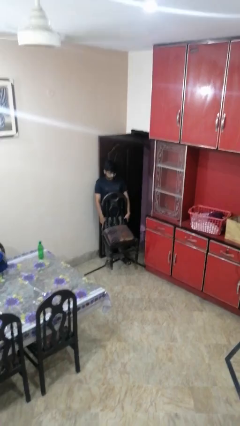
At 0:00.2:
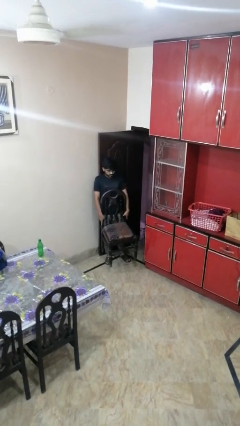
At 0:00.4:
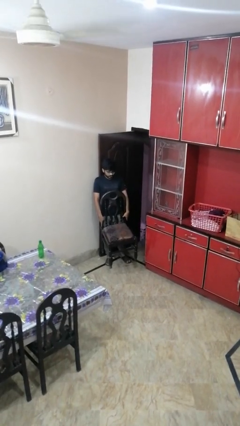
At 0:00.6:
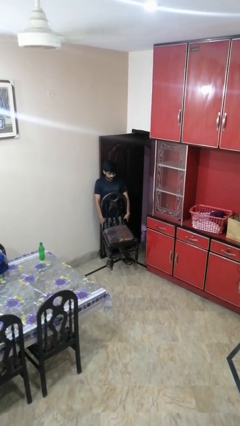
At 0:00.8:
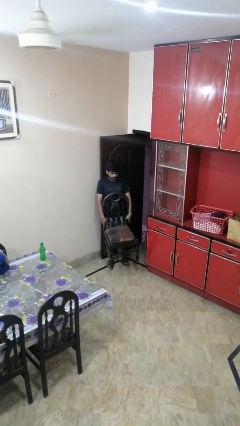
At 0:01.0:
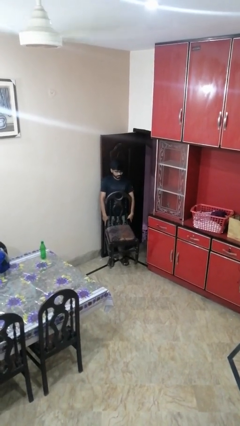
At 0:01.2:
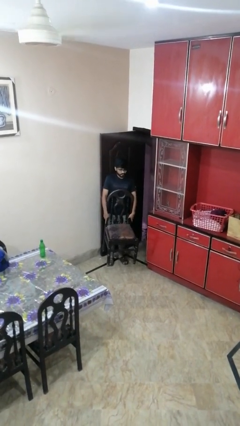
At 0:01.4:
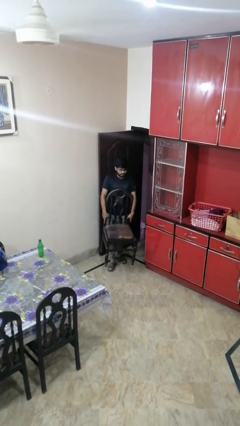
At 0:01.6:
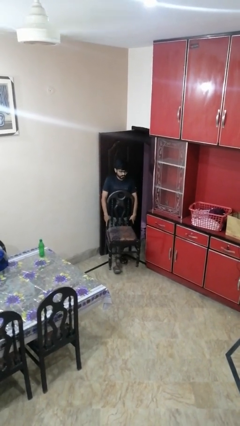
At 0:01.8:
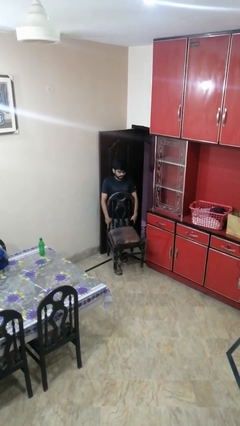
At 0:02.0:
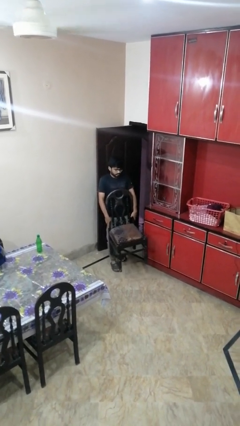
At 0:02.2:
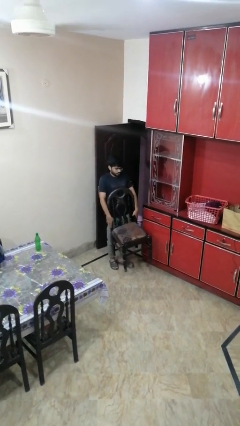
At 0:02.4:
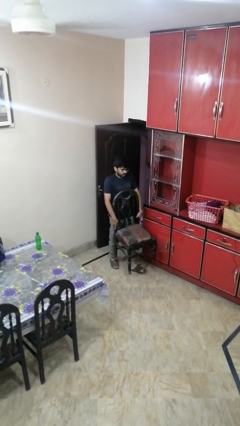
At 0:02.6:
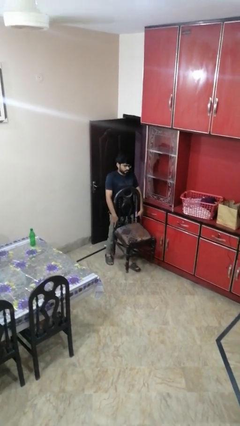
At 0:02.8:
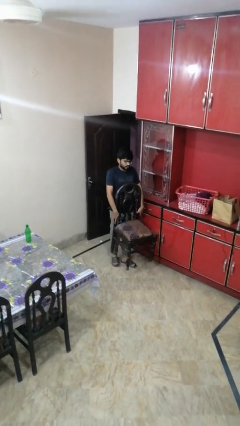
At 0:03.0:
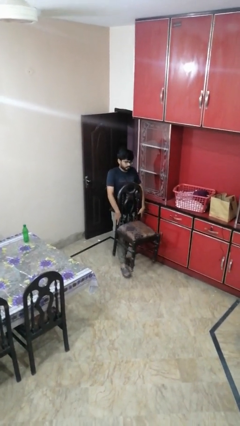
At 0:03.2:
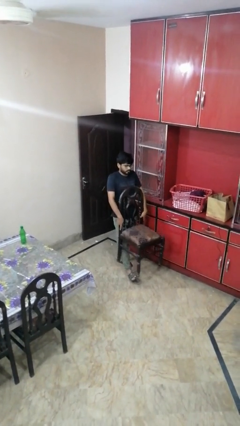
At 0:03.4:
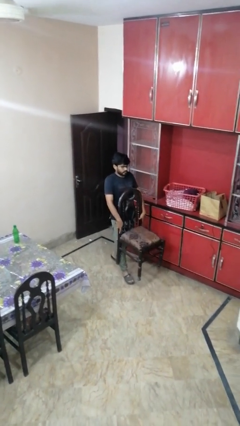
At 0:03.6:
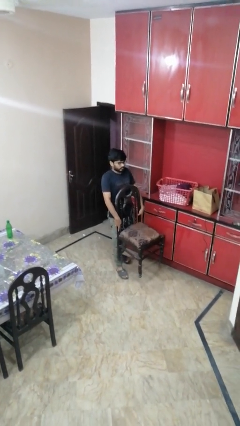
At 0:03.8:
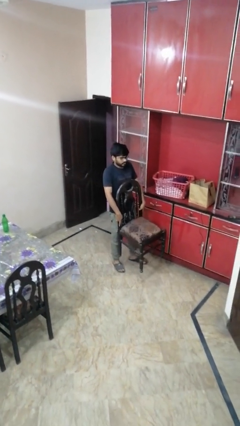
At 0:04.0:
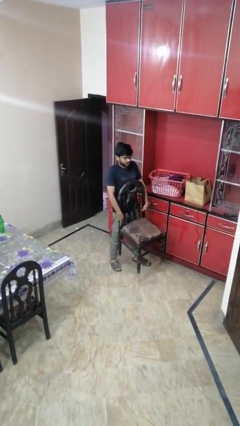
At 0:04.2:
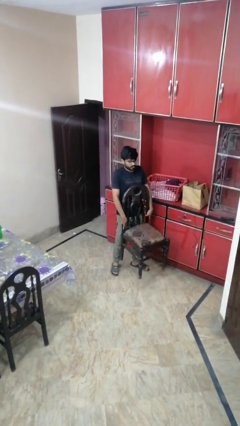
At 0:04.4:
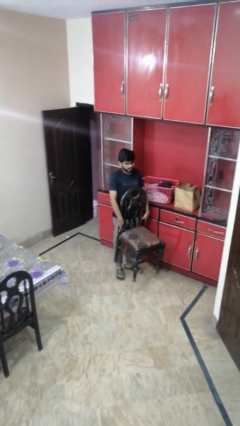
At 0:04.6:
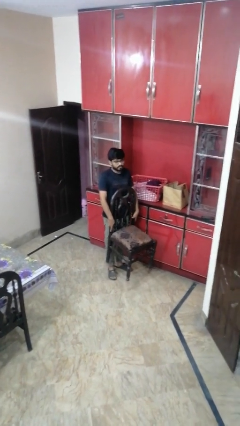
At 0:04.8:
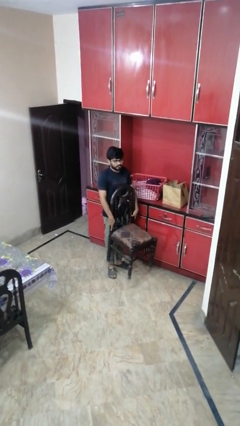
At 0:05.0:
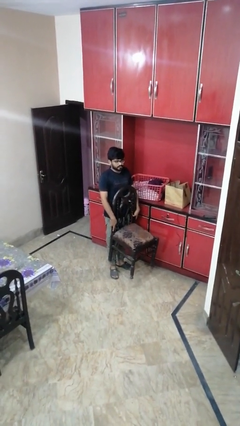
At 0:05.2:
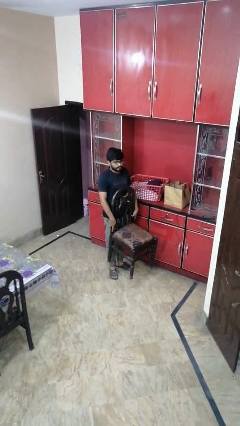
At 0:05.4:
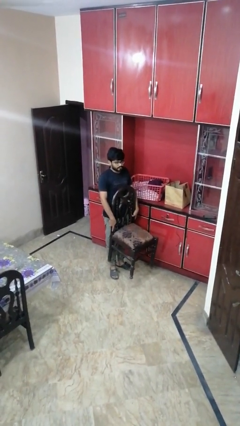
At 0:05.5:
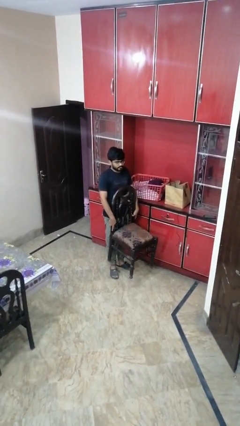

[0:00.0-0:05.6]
person carries furniture

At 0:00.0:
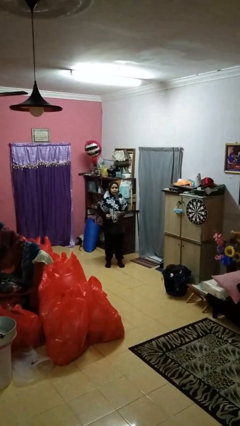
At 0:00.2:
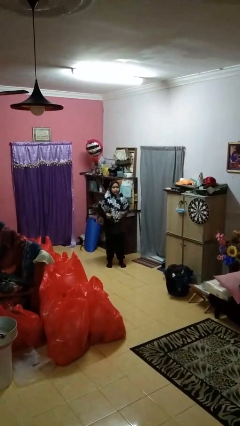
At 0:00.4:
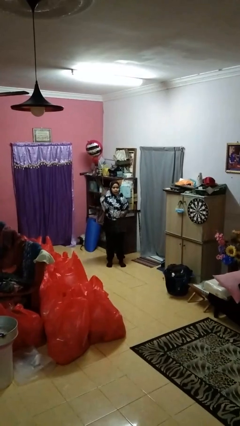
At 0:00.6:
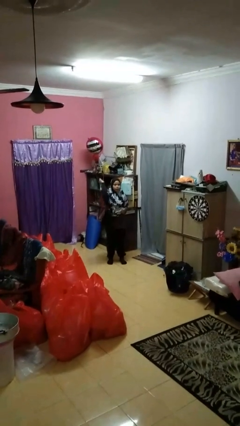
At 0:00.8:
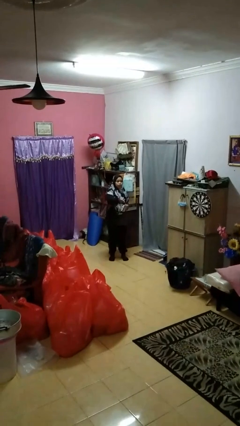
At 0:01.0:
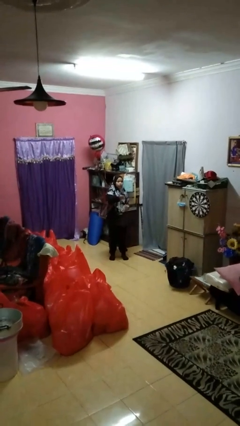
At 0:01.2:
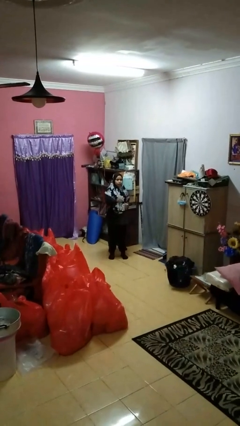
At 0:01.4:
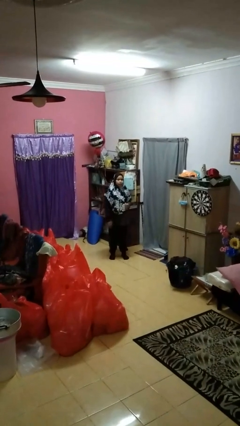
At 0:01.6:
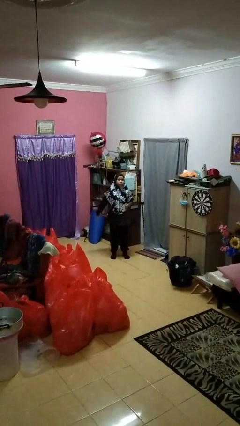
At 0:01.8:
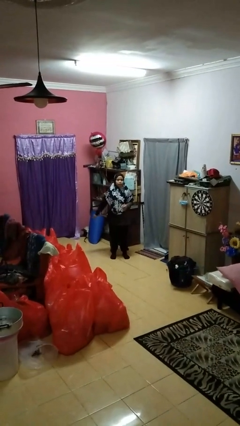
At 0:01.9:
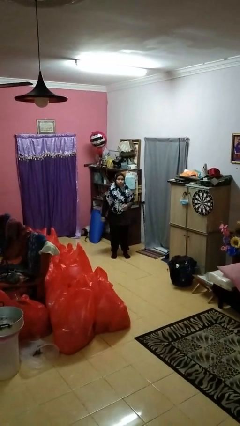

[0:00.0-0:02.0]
person karate chop

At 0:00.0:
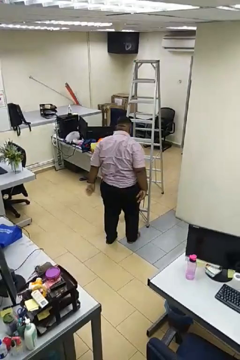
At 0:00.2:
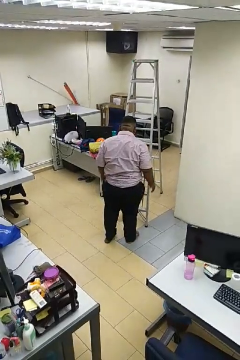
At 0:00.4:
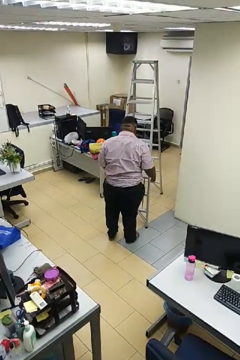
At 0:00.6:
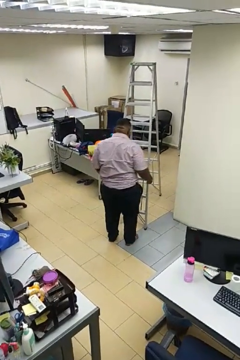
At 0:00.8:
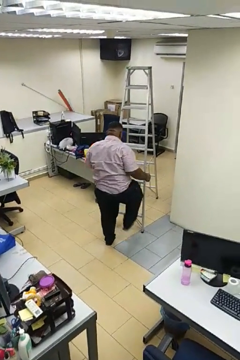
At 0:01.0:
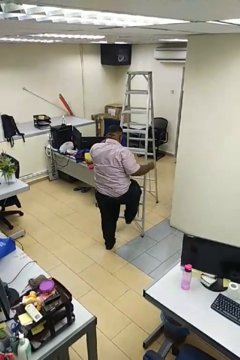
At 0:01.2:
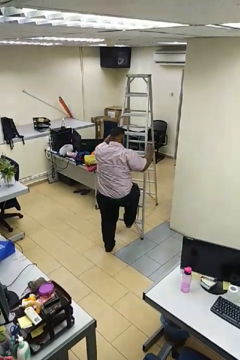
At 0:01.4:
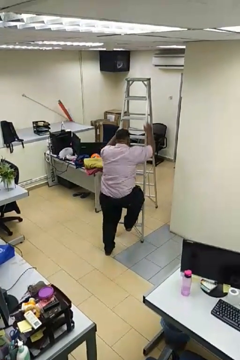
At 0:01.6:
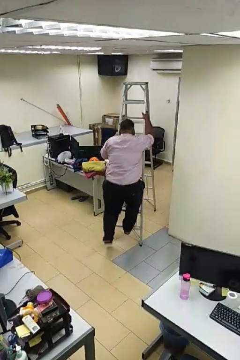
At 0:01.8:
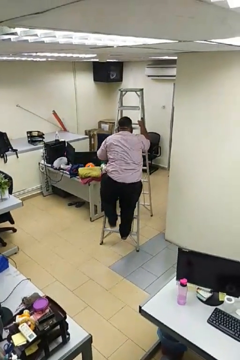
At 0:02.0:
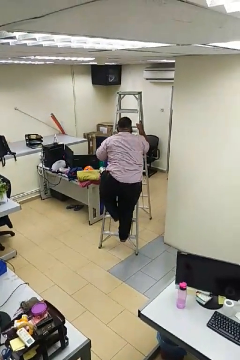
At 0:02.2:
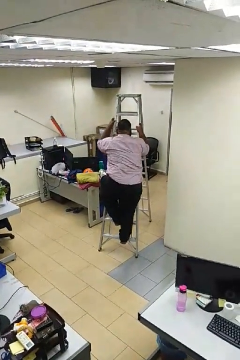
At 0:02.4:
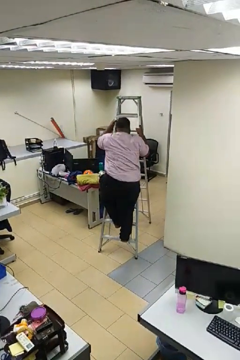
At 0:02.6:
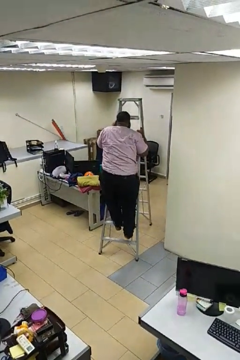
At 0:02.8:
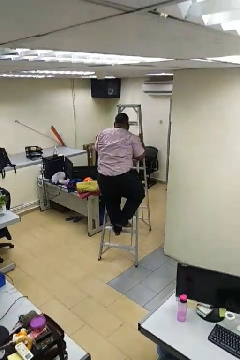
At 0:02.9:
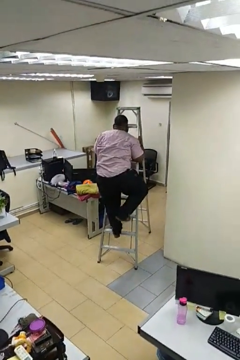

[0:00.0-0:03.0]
person climbs up ladder

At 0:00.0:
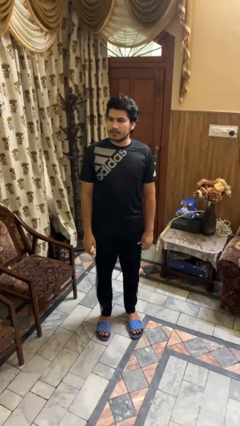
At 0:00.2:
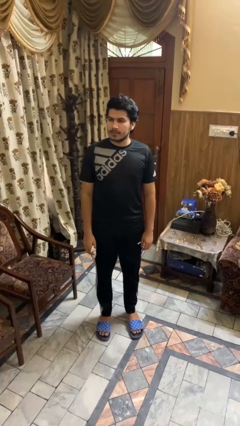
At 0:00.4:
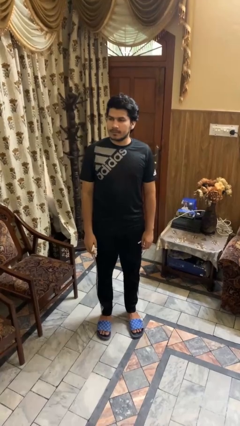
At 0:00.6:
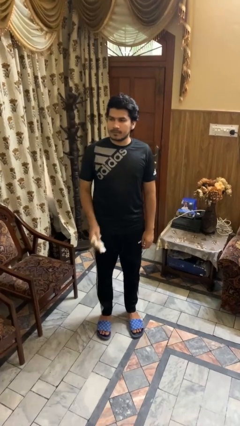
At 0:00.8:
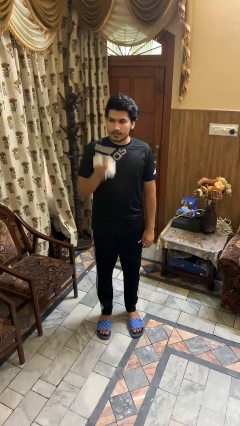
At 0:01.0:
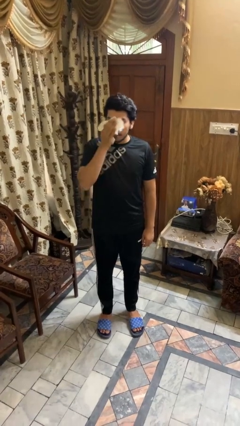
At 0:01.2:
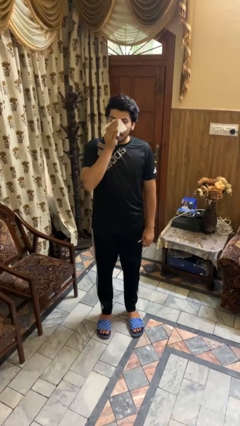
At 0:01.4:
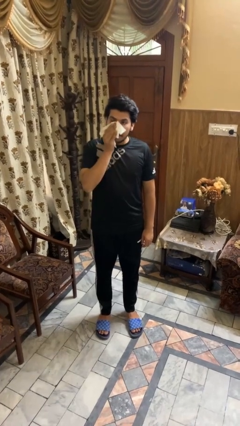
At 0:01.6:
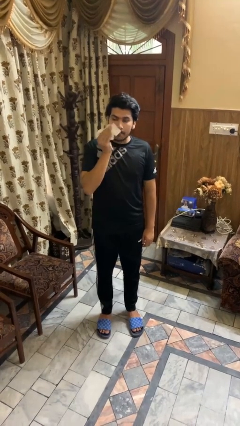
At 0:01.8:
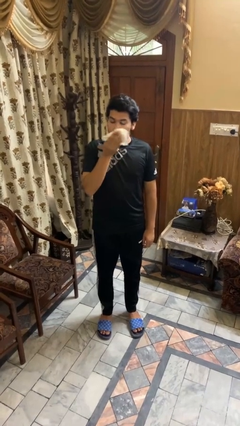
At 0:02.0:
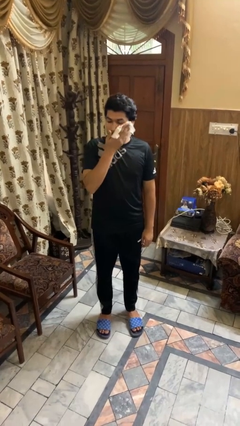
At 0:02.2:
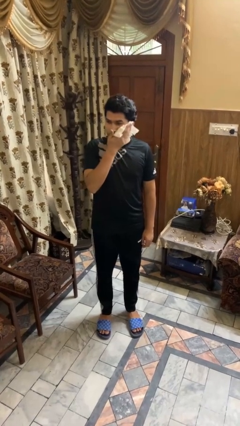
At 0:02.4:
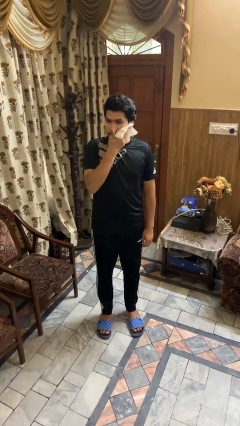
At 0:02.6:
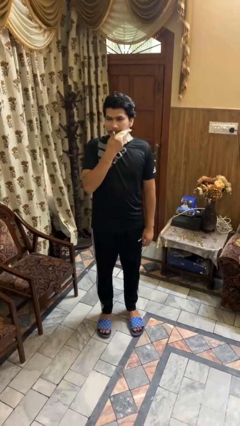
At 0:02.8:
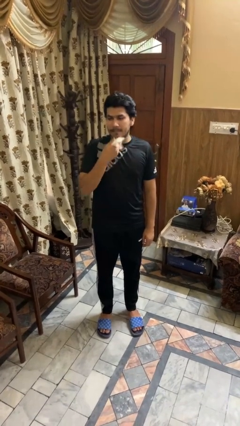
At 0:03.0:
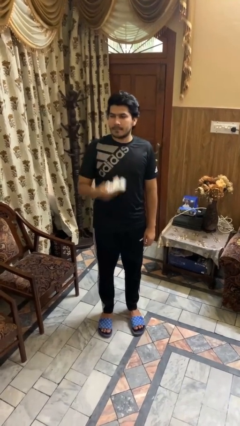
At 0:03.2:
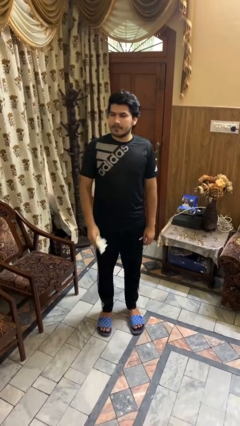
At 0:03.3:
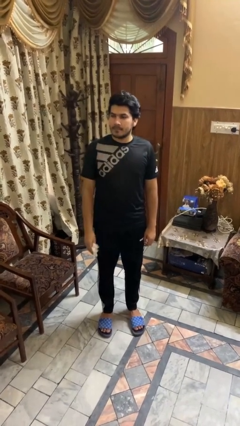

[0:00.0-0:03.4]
person wipes mouth with napkin

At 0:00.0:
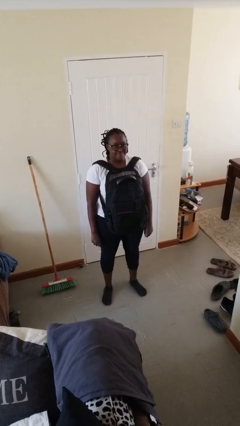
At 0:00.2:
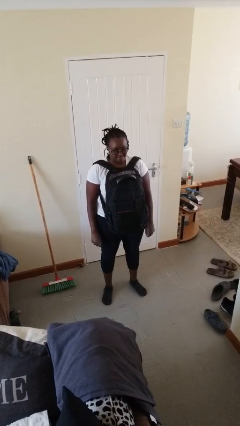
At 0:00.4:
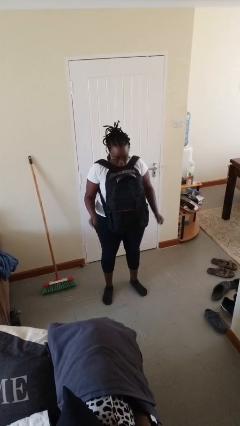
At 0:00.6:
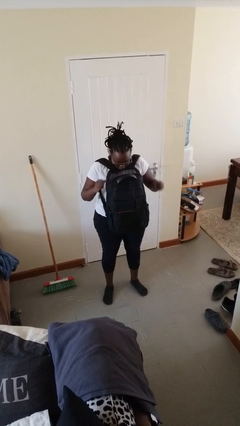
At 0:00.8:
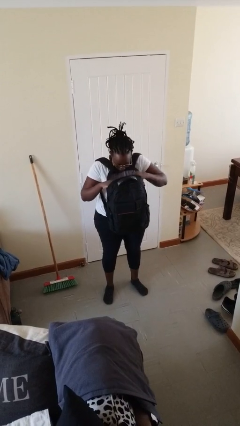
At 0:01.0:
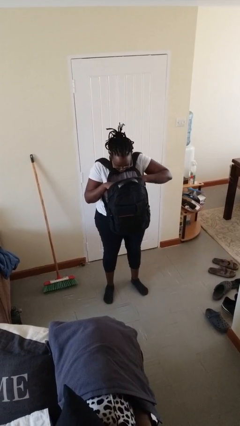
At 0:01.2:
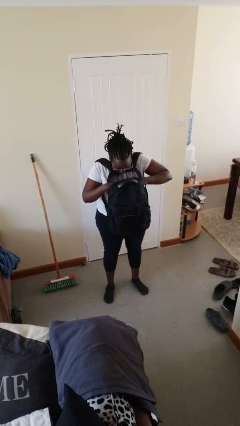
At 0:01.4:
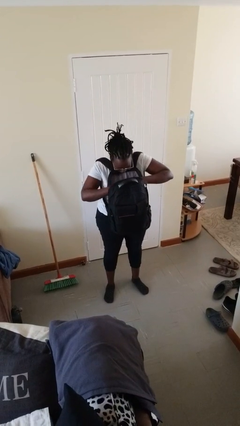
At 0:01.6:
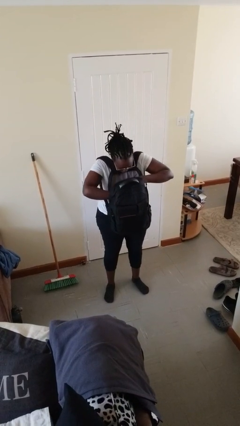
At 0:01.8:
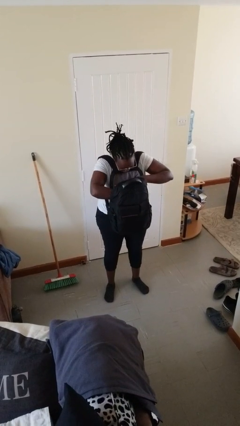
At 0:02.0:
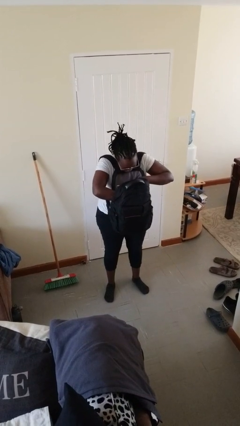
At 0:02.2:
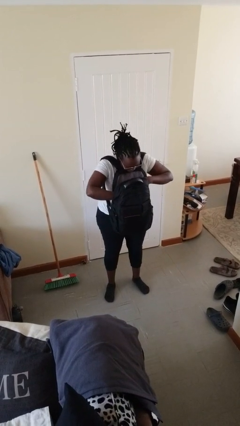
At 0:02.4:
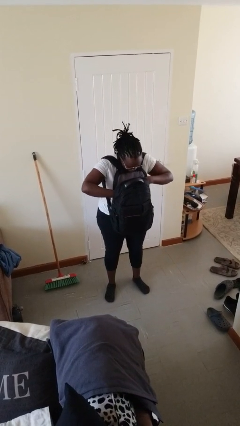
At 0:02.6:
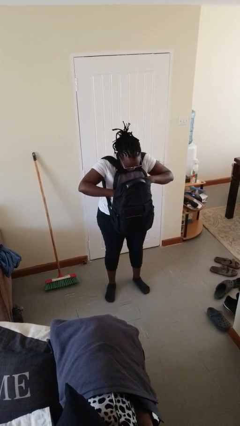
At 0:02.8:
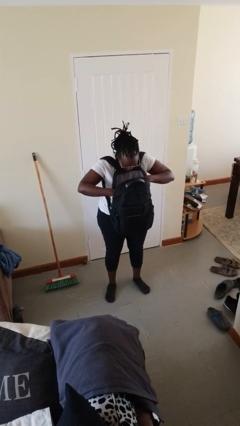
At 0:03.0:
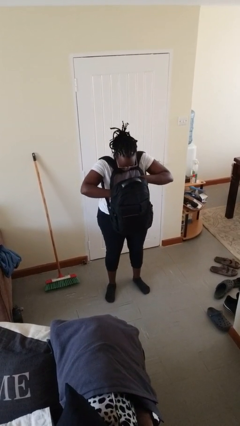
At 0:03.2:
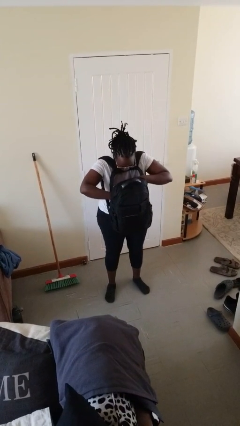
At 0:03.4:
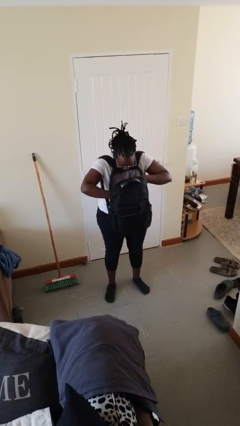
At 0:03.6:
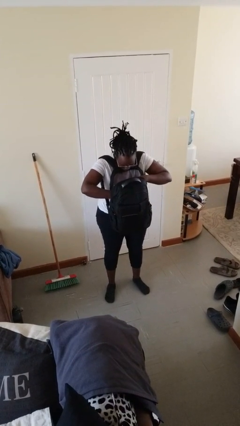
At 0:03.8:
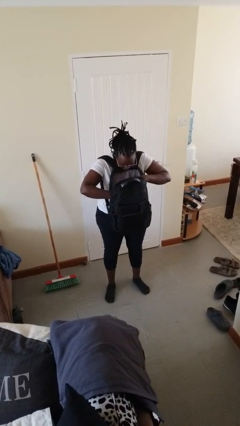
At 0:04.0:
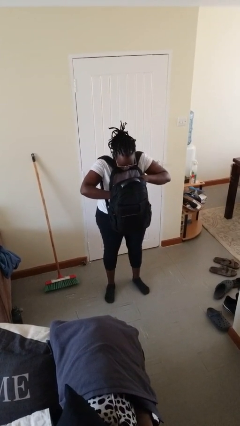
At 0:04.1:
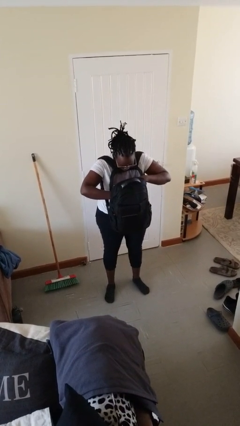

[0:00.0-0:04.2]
person searches in backpack
